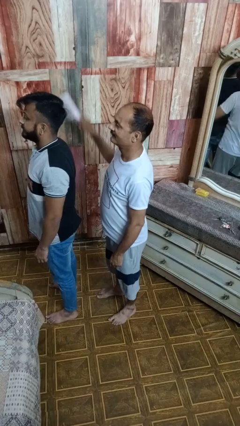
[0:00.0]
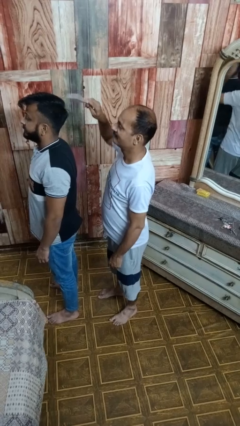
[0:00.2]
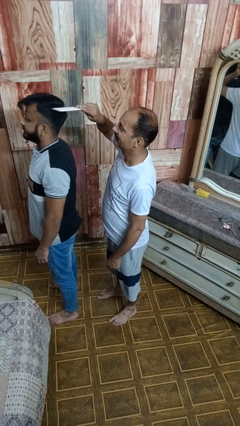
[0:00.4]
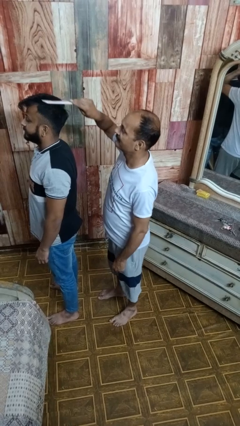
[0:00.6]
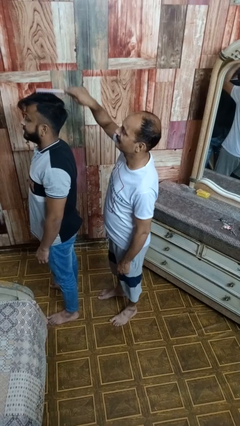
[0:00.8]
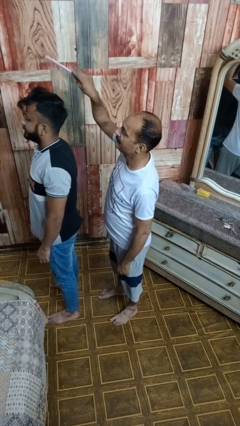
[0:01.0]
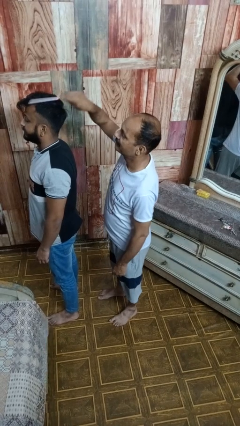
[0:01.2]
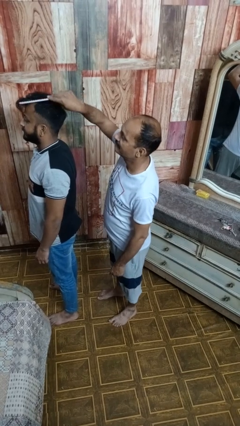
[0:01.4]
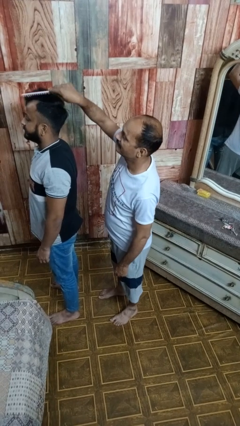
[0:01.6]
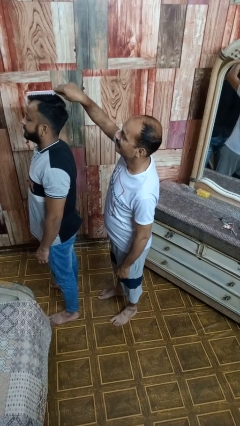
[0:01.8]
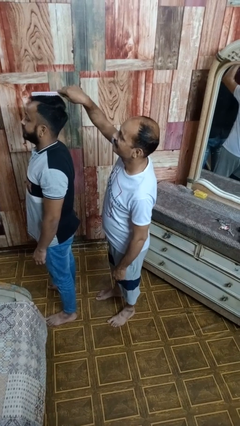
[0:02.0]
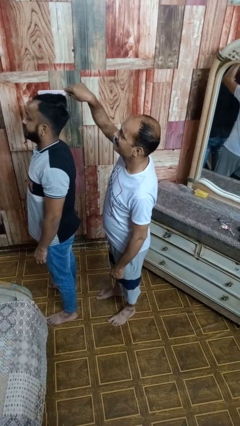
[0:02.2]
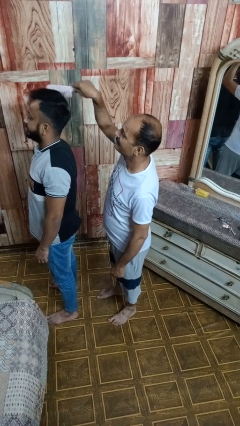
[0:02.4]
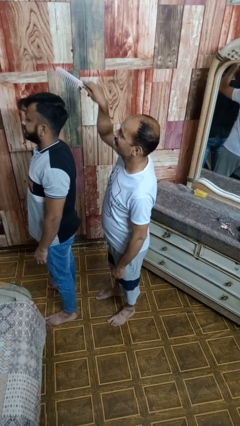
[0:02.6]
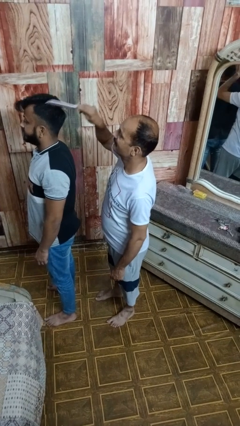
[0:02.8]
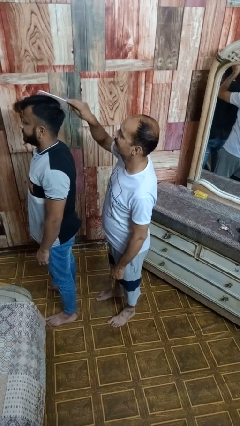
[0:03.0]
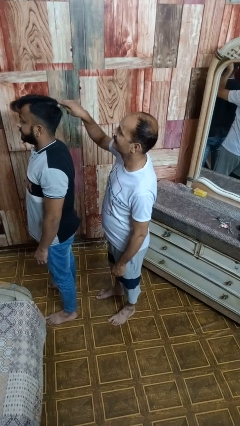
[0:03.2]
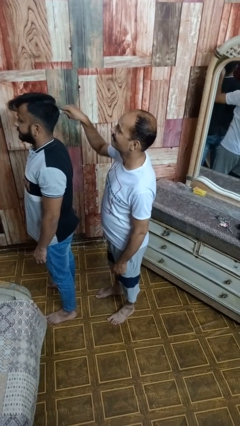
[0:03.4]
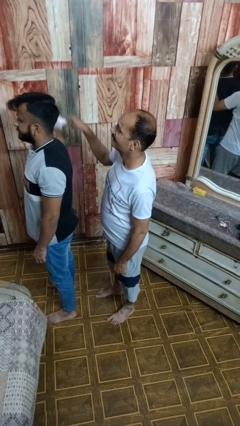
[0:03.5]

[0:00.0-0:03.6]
person brushes hair of person

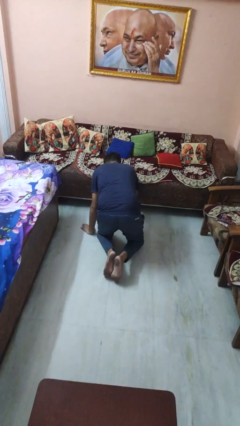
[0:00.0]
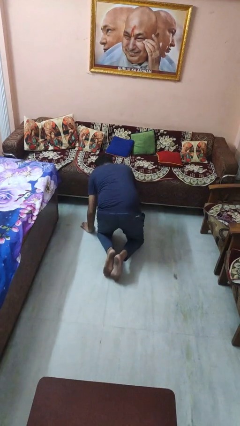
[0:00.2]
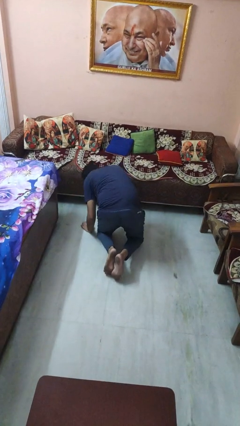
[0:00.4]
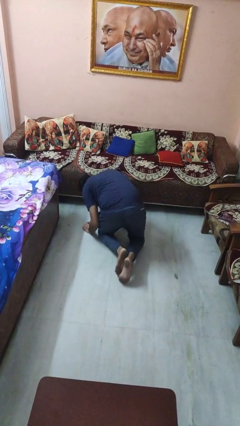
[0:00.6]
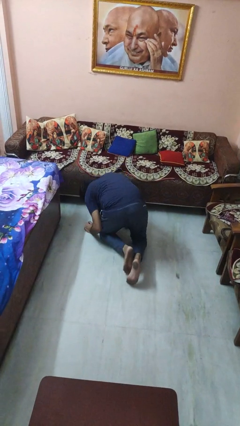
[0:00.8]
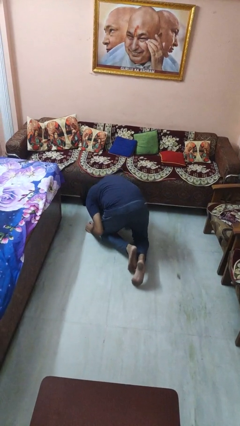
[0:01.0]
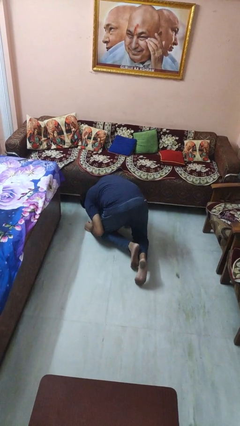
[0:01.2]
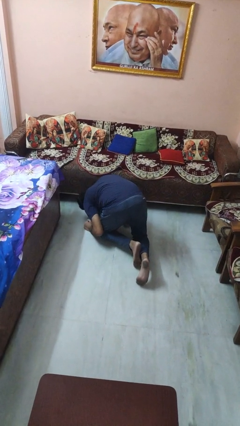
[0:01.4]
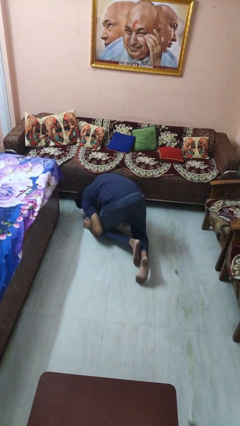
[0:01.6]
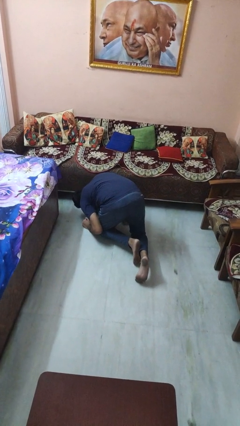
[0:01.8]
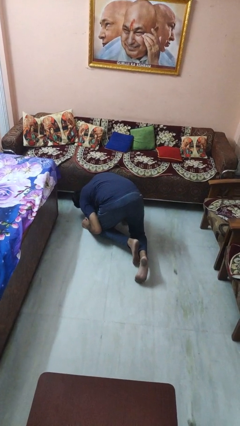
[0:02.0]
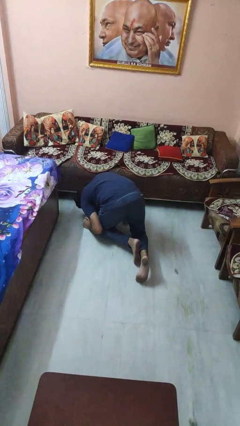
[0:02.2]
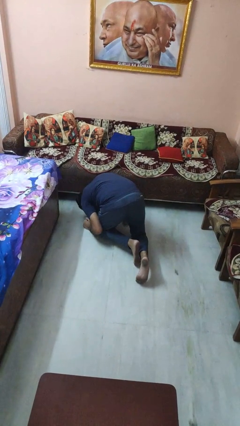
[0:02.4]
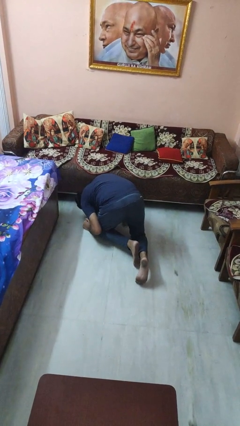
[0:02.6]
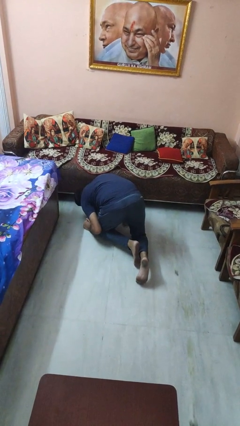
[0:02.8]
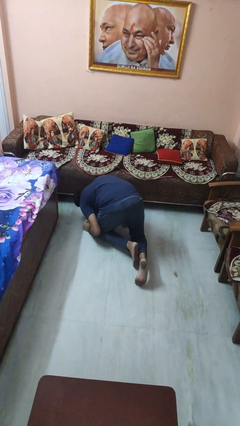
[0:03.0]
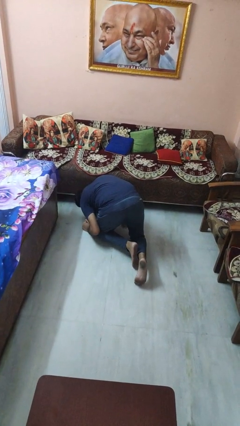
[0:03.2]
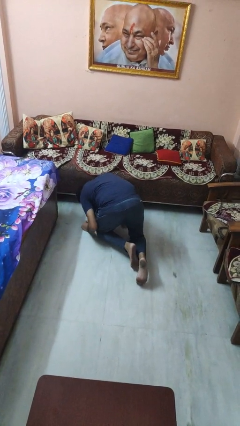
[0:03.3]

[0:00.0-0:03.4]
person searches under couch

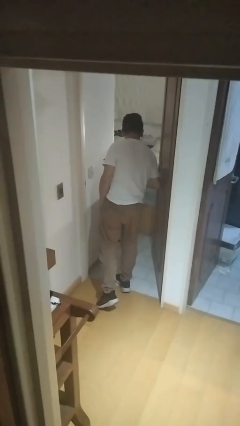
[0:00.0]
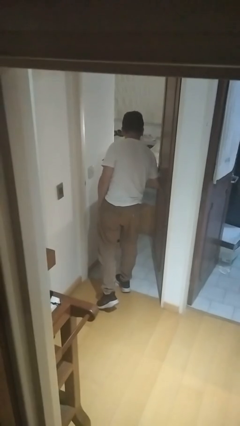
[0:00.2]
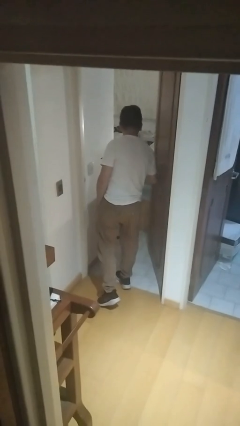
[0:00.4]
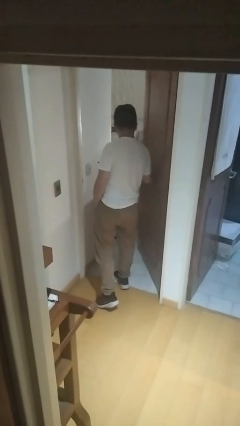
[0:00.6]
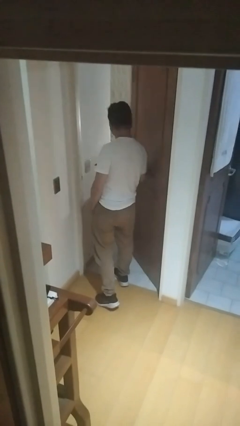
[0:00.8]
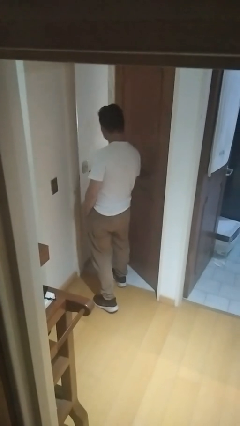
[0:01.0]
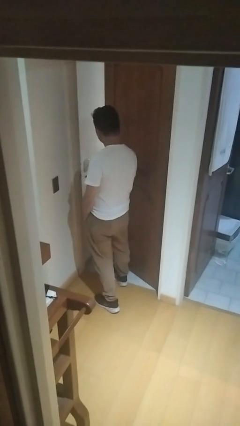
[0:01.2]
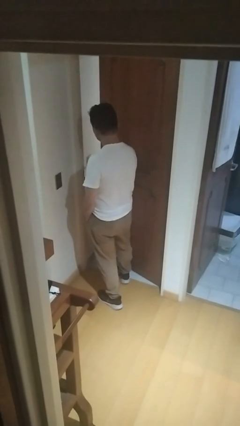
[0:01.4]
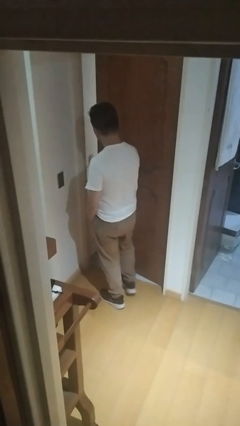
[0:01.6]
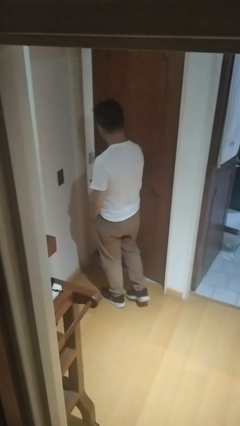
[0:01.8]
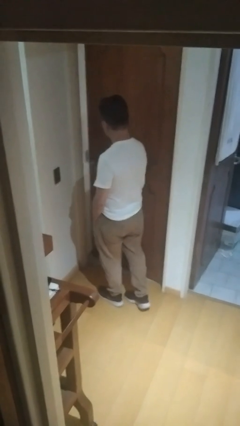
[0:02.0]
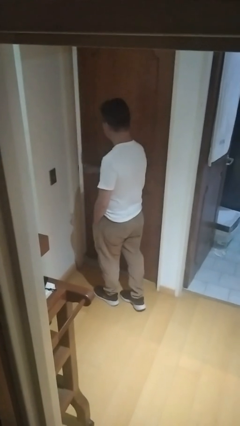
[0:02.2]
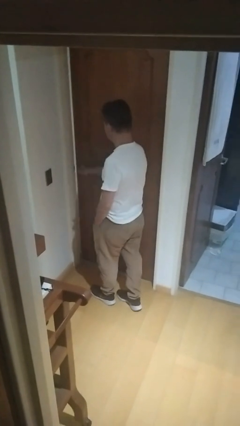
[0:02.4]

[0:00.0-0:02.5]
person closes facility door

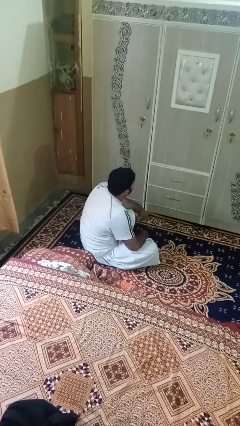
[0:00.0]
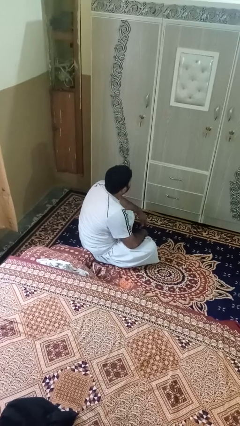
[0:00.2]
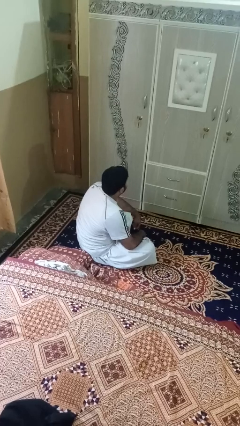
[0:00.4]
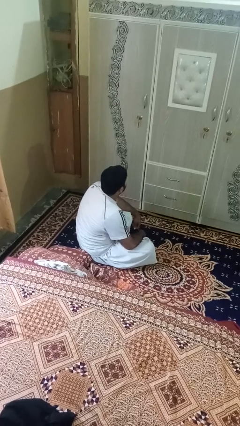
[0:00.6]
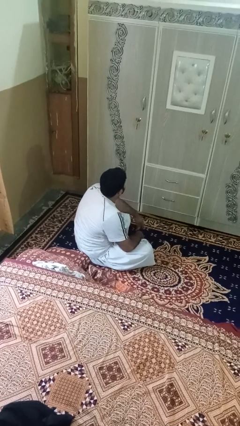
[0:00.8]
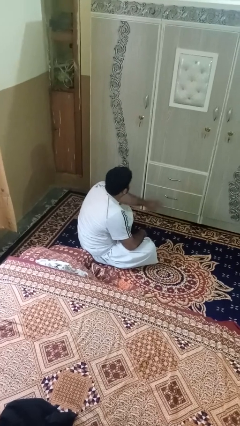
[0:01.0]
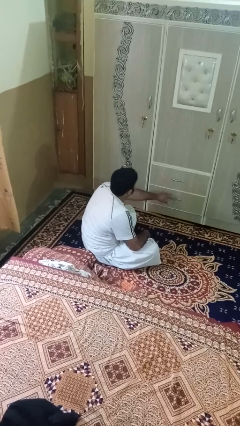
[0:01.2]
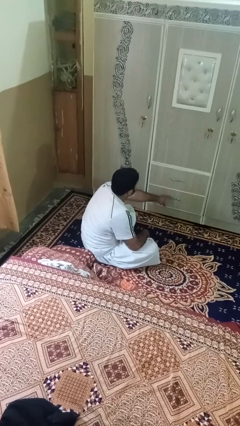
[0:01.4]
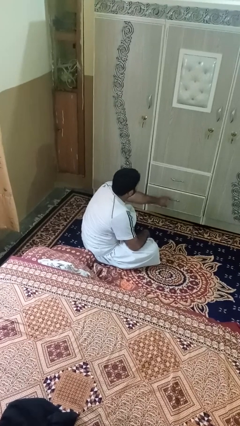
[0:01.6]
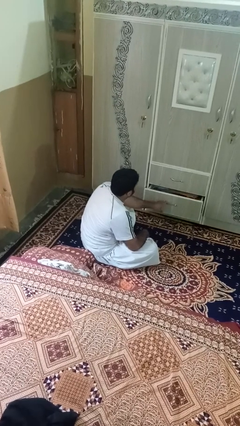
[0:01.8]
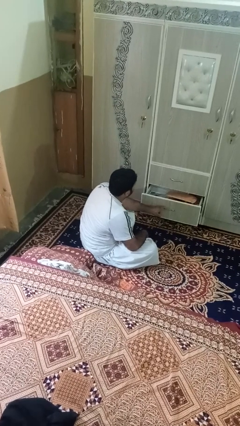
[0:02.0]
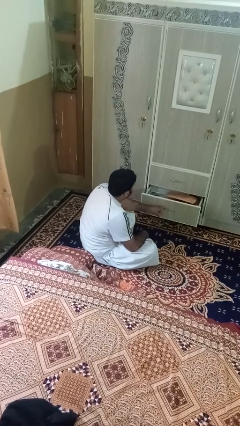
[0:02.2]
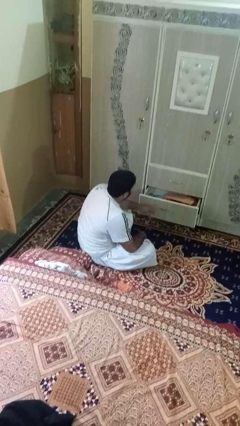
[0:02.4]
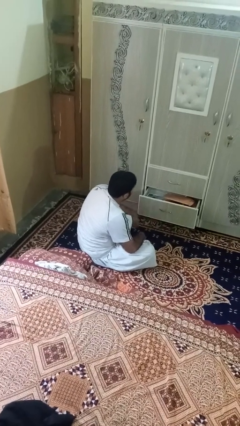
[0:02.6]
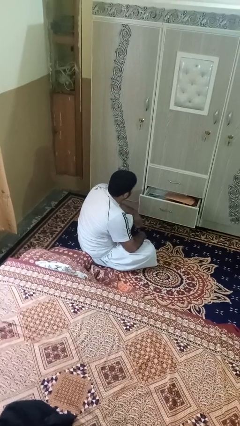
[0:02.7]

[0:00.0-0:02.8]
person opens dresser drawer

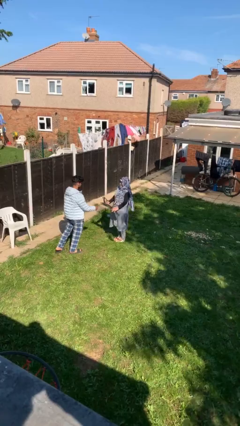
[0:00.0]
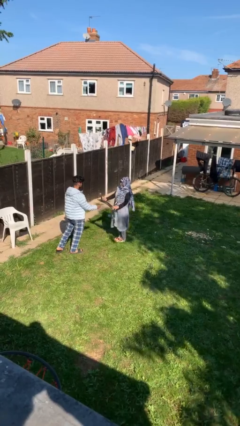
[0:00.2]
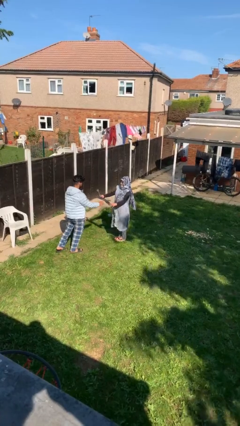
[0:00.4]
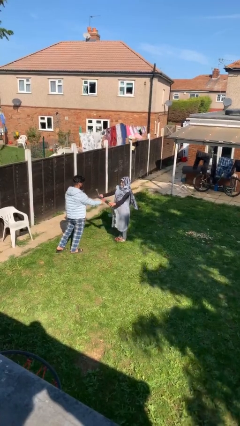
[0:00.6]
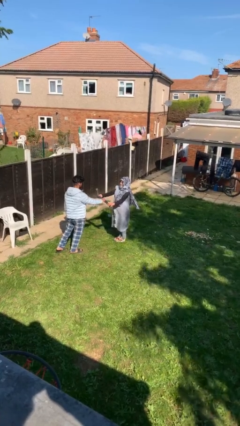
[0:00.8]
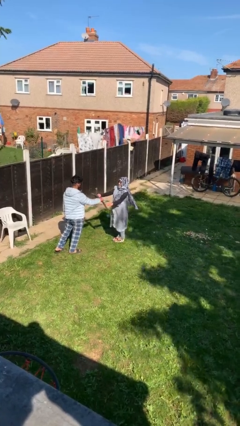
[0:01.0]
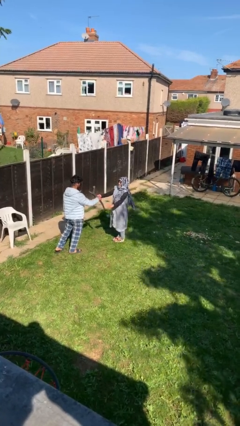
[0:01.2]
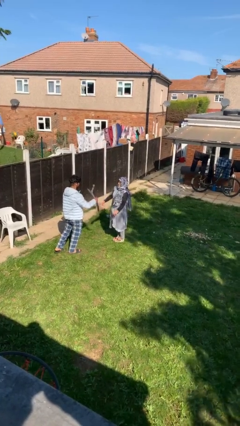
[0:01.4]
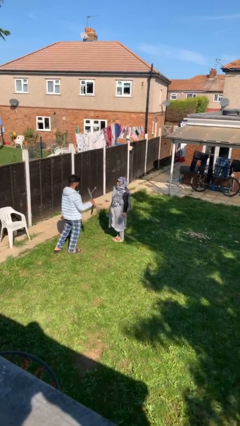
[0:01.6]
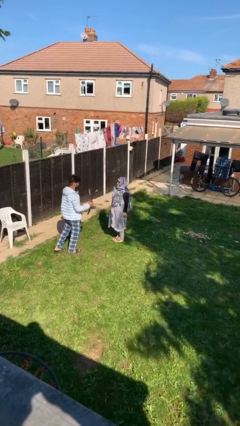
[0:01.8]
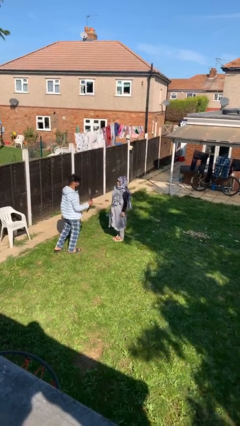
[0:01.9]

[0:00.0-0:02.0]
person transfers object to person

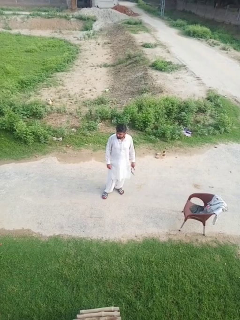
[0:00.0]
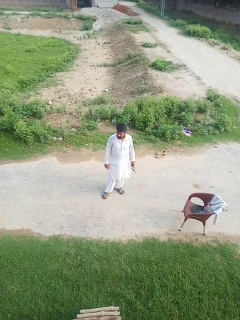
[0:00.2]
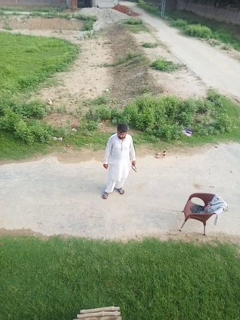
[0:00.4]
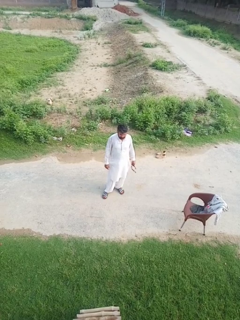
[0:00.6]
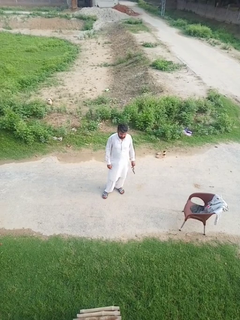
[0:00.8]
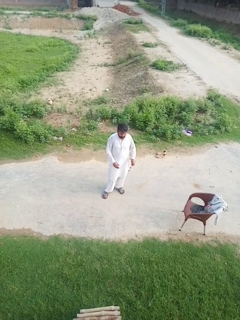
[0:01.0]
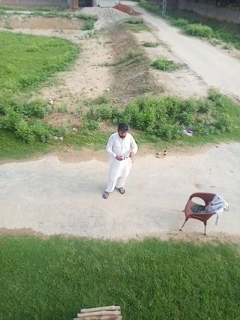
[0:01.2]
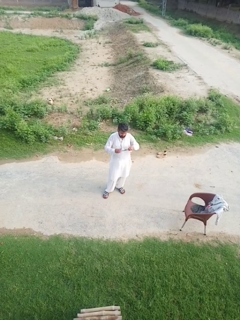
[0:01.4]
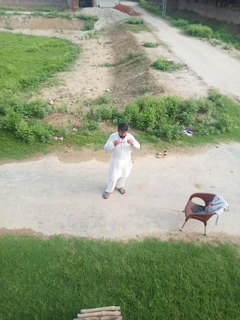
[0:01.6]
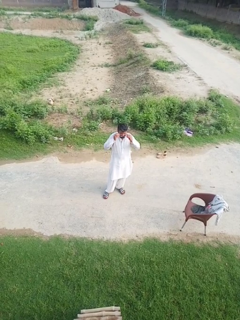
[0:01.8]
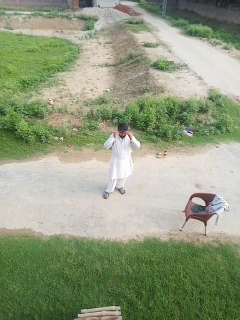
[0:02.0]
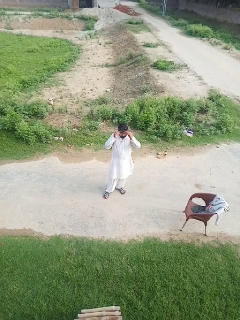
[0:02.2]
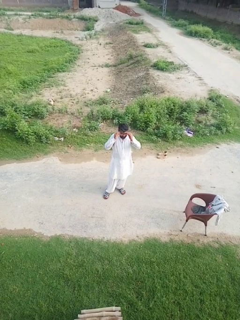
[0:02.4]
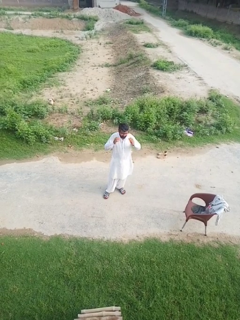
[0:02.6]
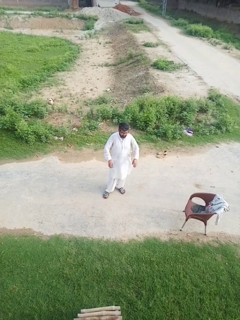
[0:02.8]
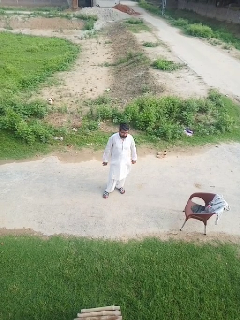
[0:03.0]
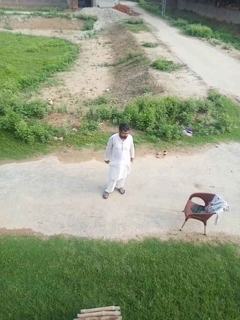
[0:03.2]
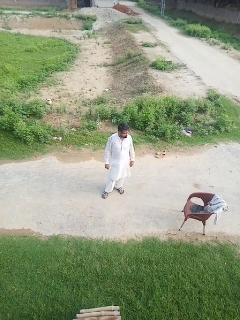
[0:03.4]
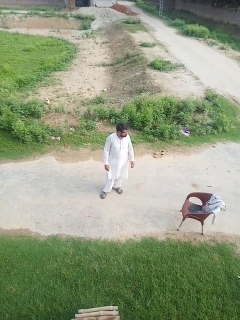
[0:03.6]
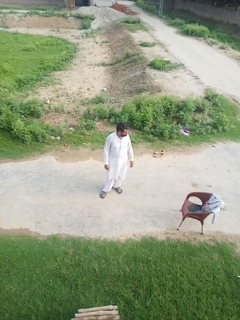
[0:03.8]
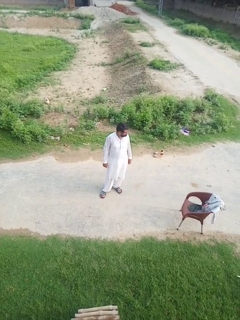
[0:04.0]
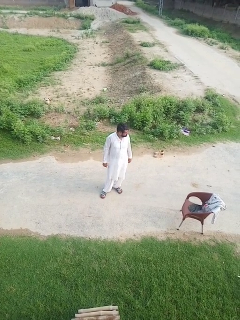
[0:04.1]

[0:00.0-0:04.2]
person puts on glasses
